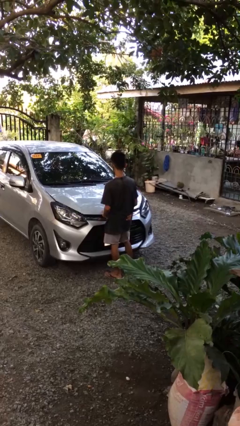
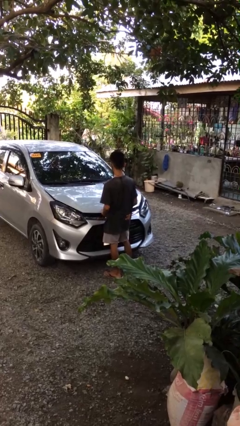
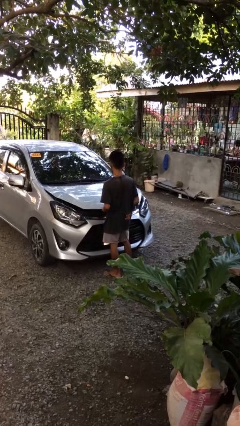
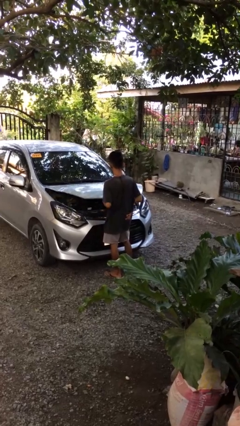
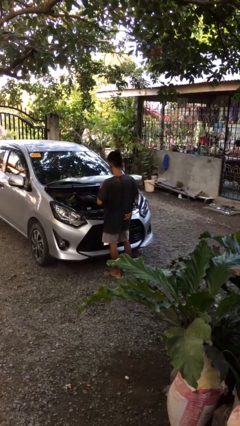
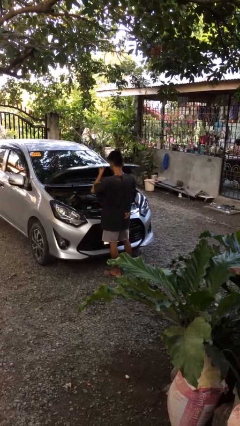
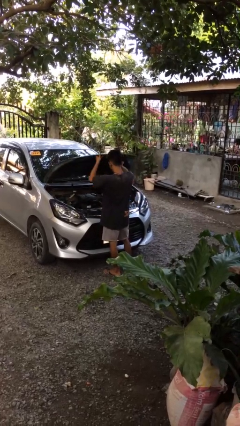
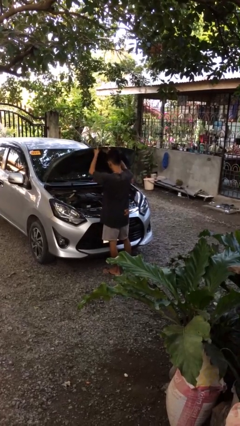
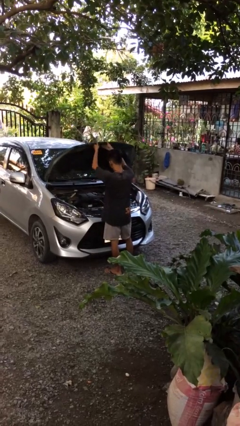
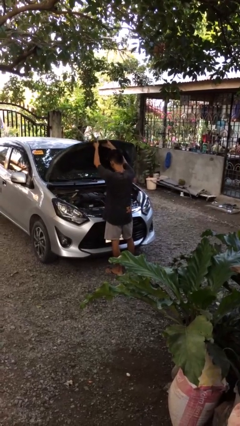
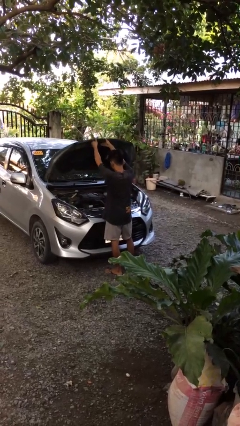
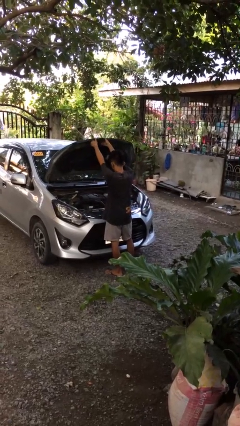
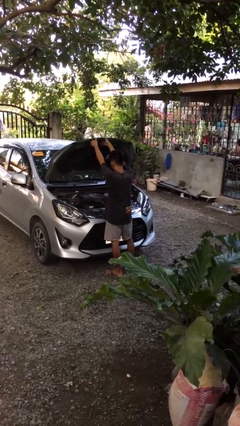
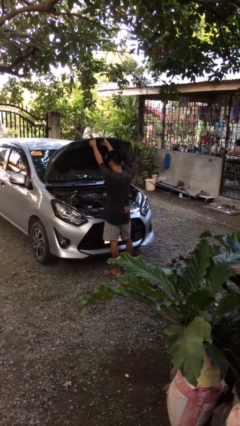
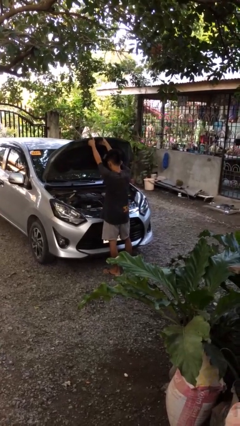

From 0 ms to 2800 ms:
person opens car hood

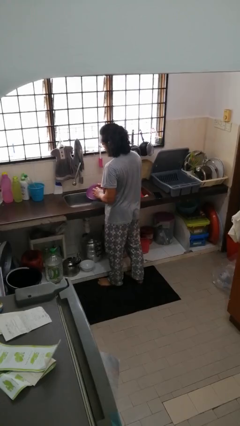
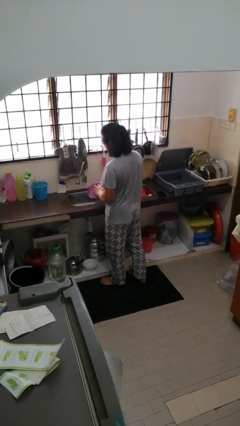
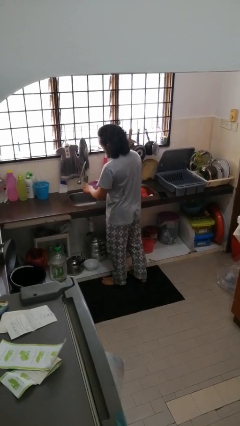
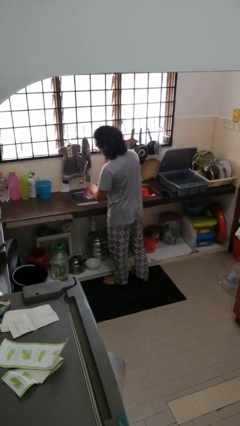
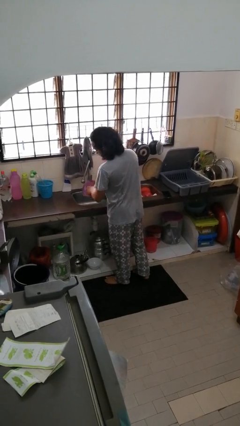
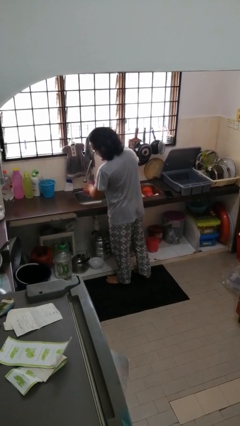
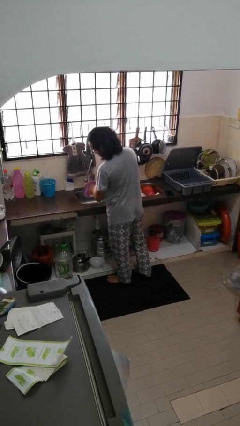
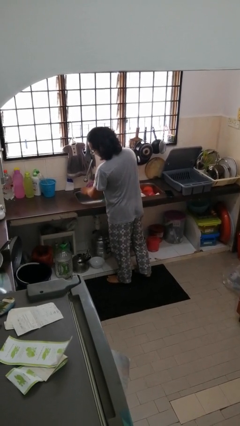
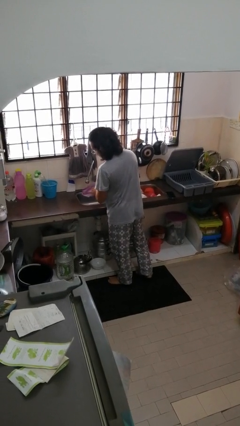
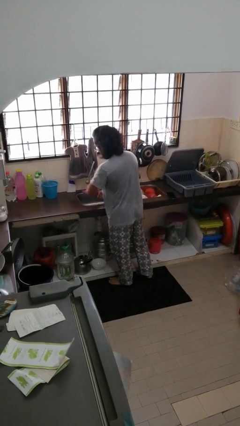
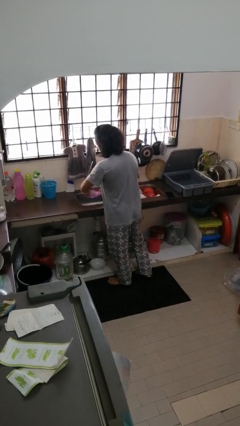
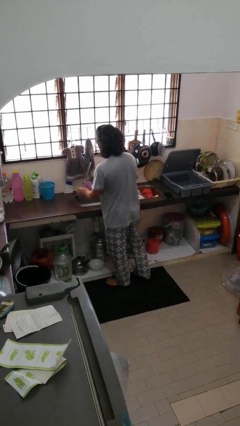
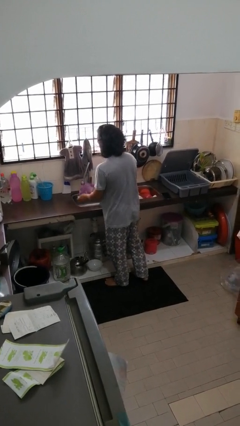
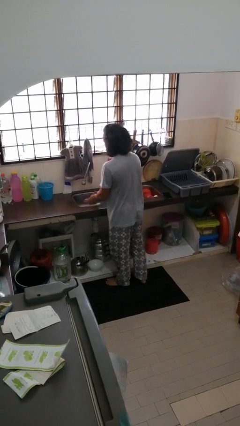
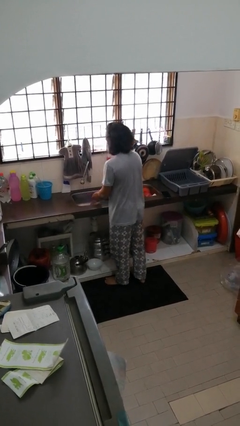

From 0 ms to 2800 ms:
person washes dish

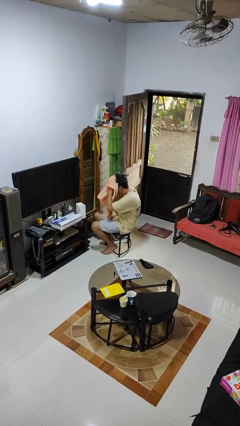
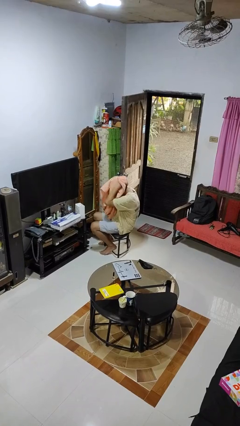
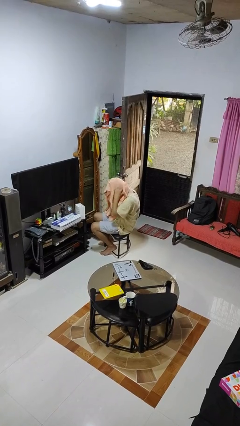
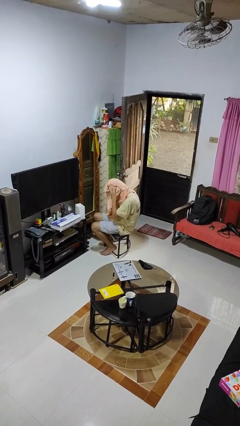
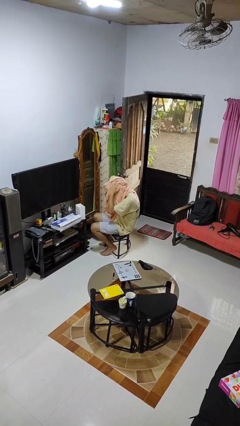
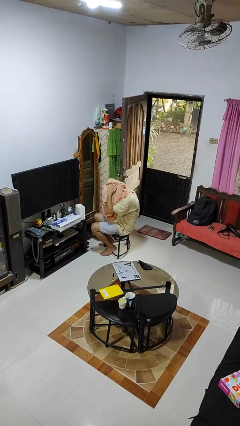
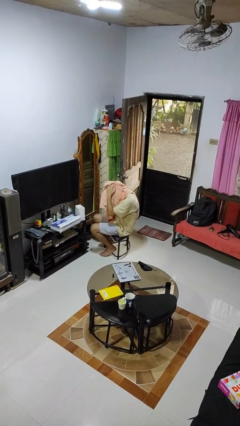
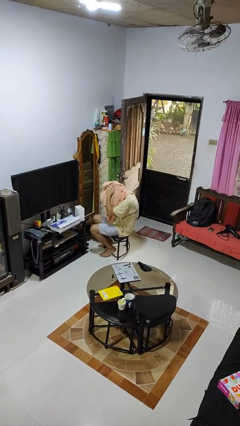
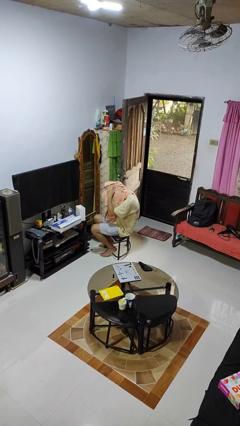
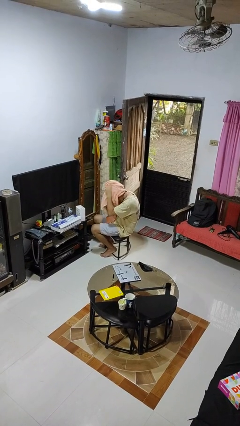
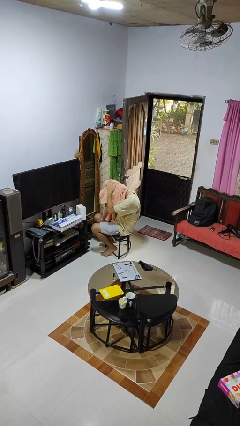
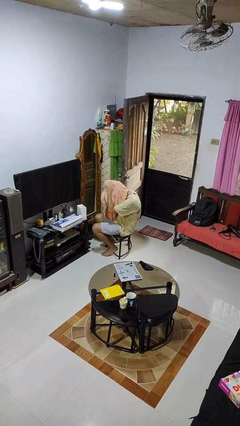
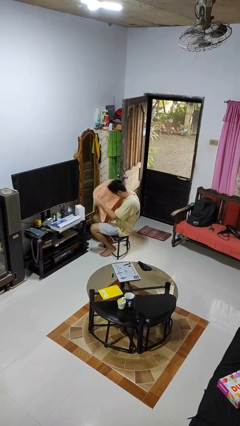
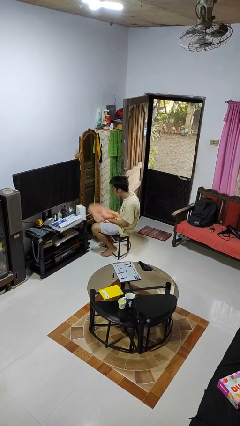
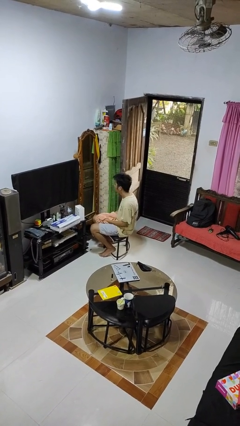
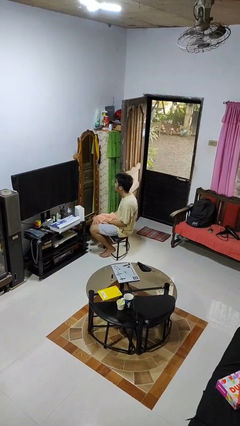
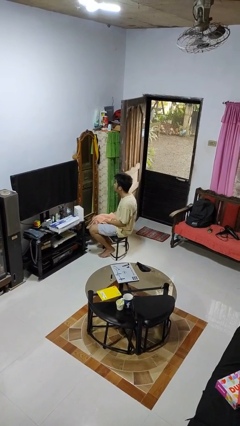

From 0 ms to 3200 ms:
person dries hair with towel

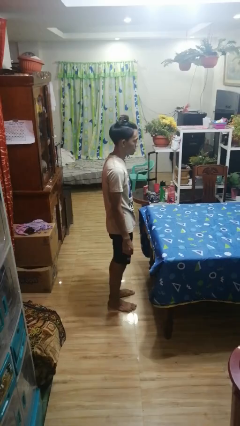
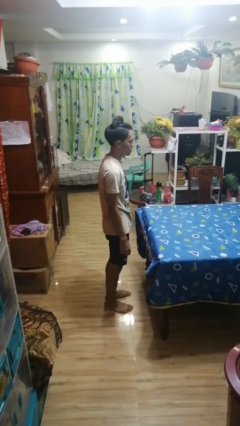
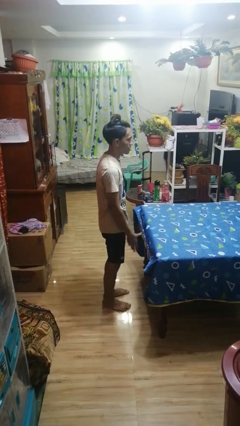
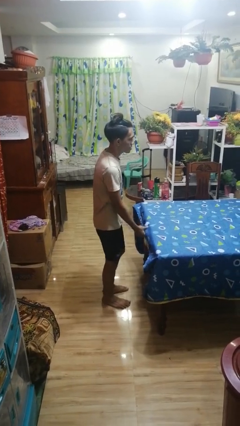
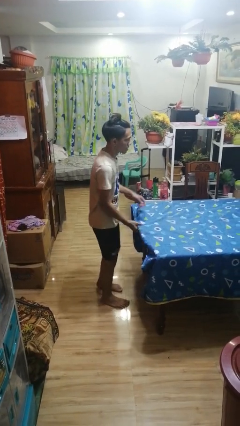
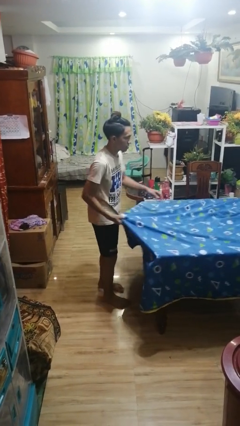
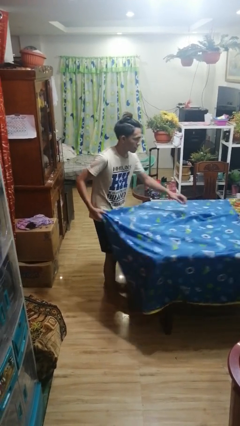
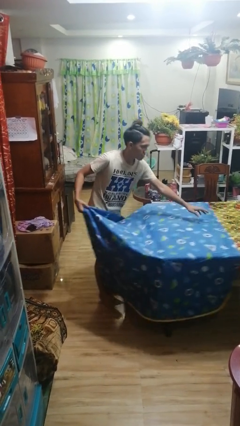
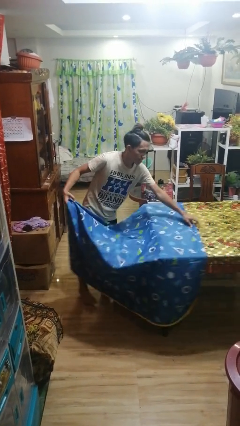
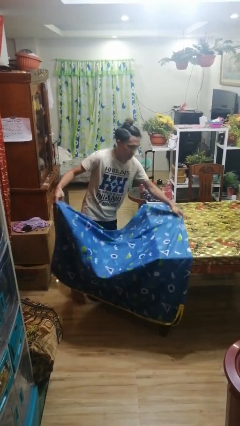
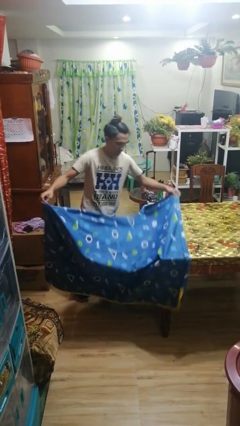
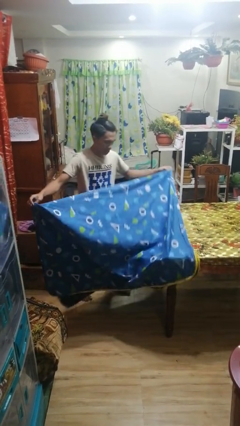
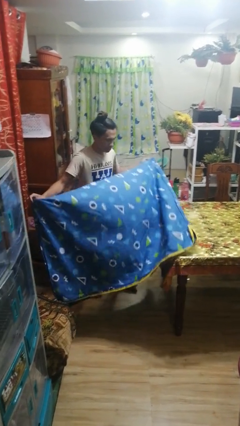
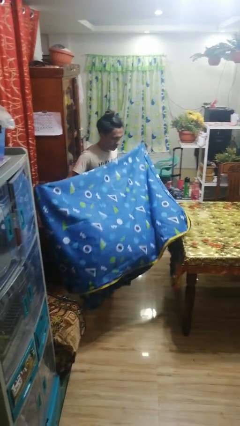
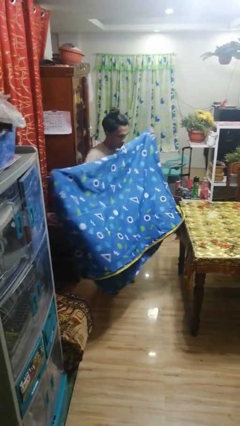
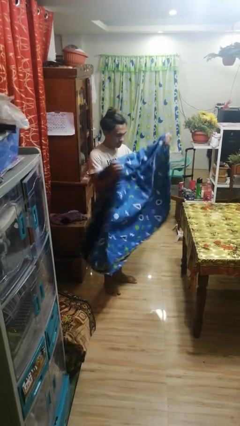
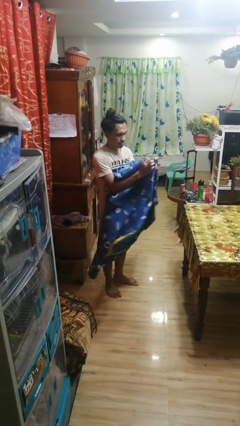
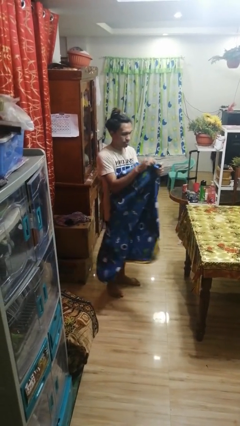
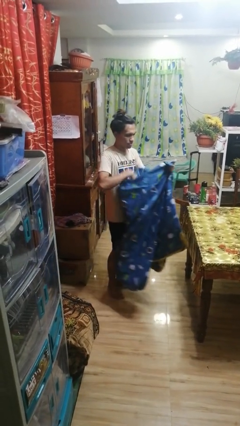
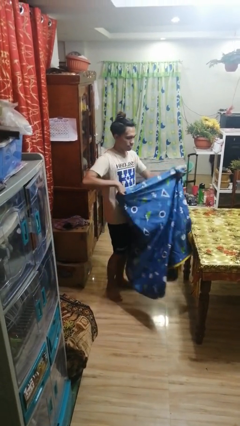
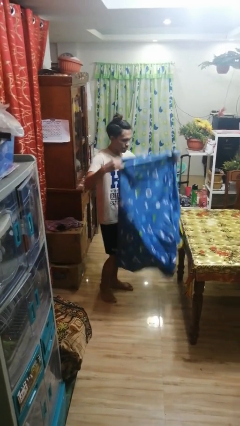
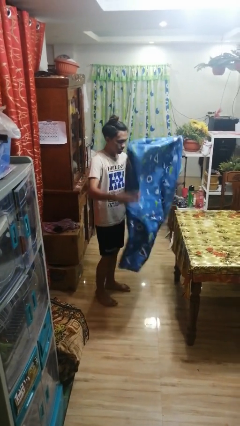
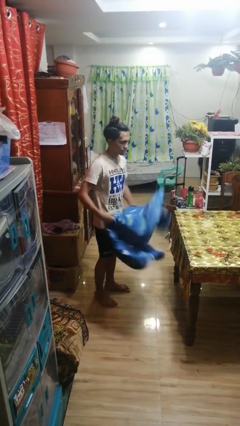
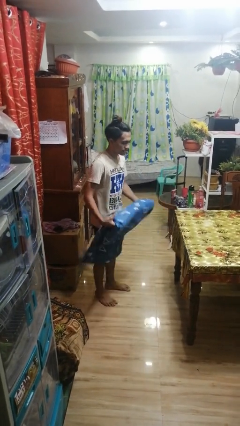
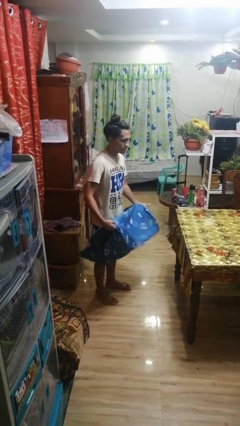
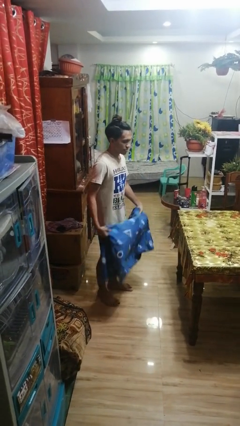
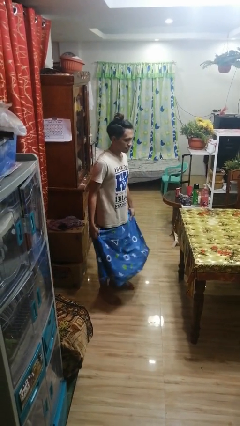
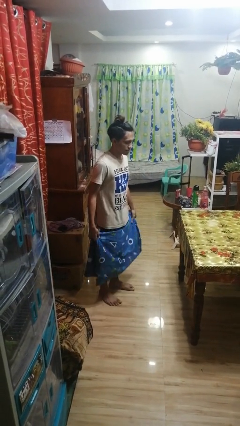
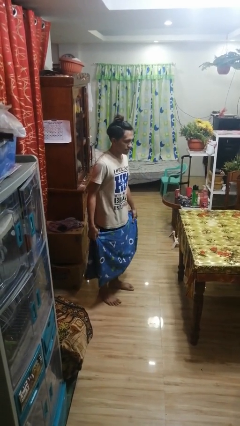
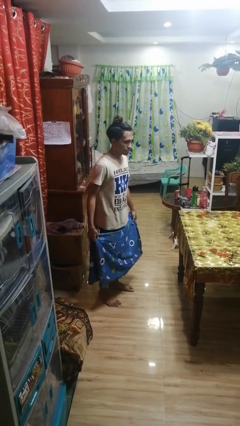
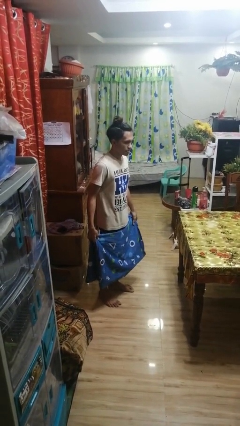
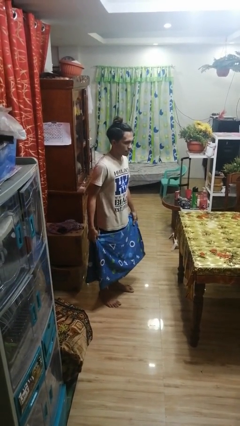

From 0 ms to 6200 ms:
person folds tablecloth

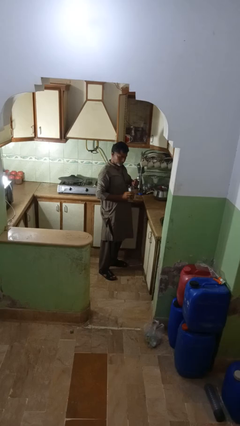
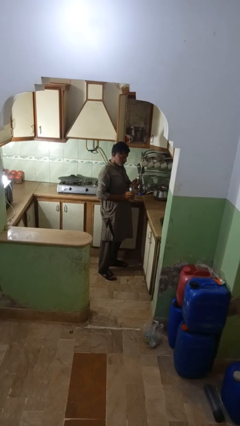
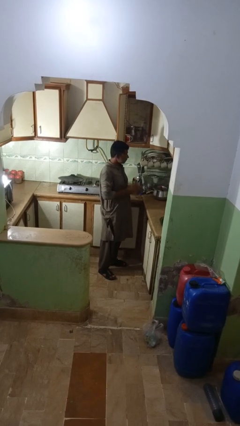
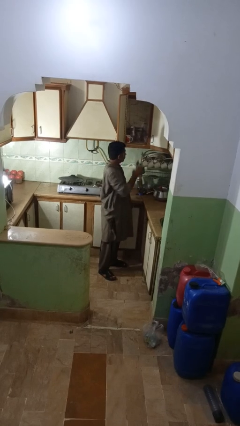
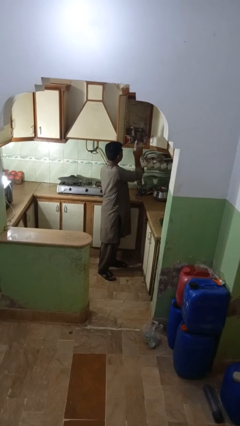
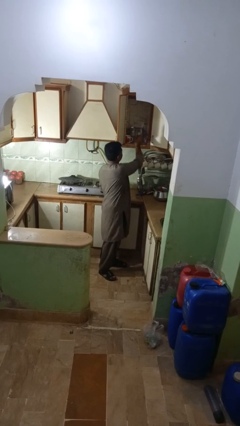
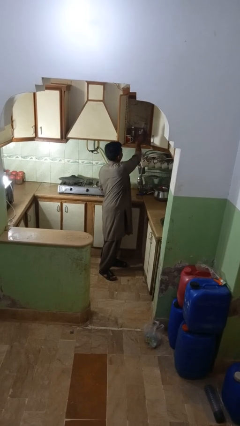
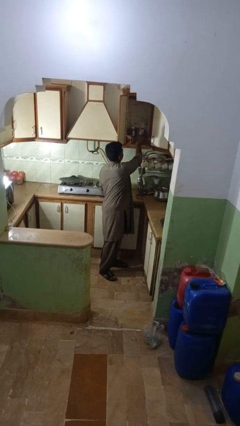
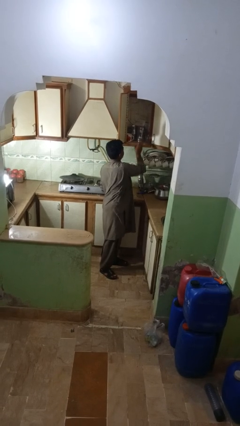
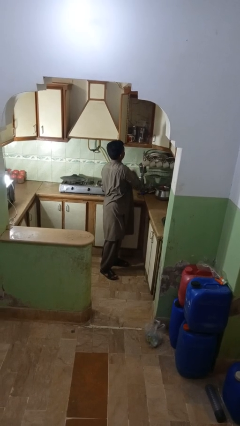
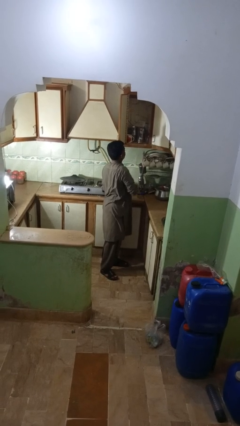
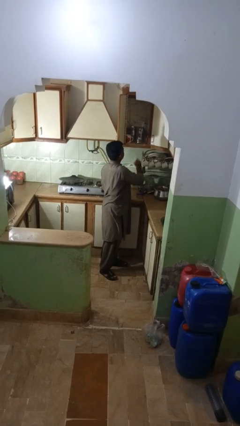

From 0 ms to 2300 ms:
person puts object into kitchen drawer
